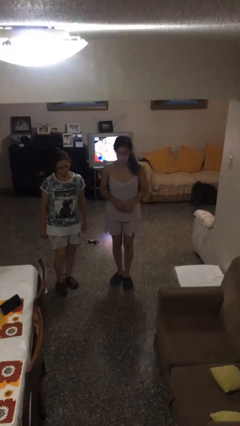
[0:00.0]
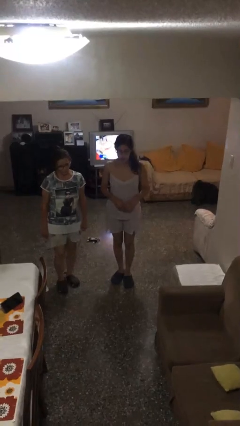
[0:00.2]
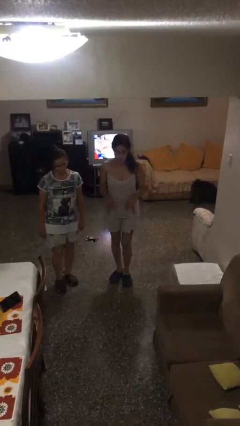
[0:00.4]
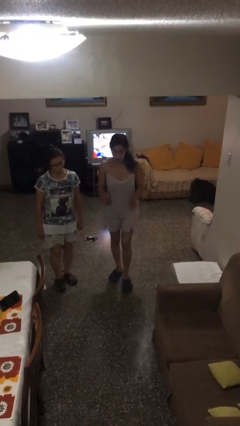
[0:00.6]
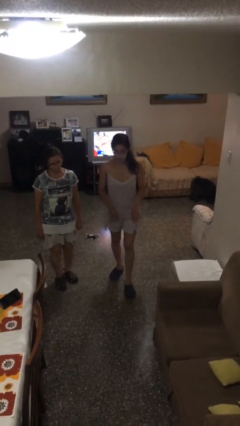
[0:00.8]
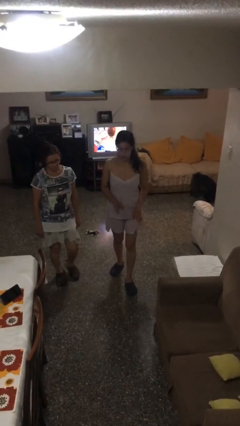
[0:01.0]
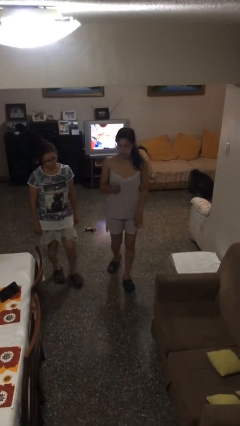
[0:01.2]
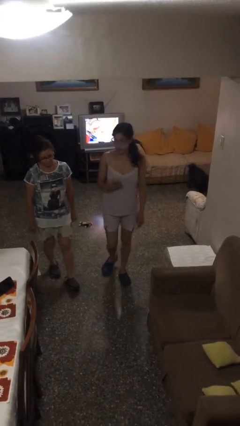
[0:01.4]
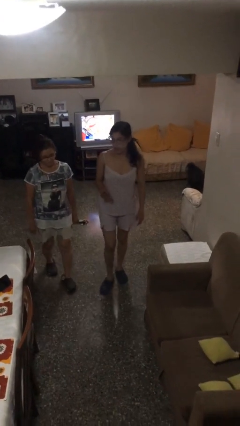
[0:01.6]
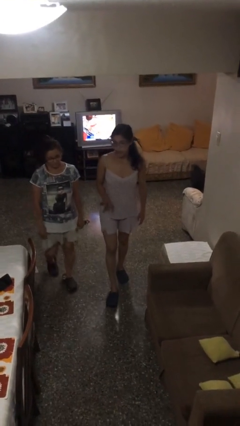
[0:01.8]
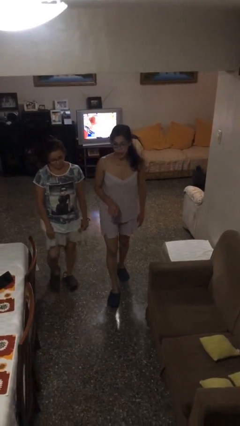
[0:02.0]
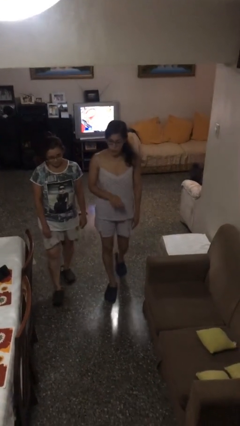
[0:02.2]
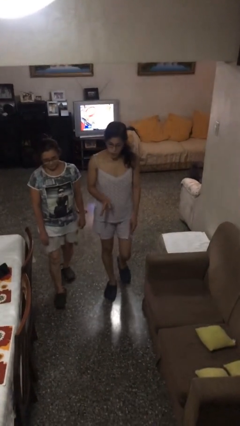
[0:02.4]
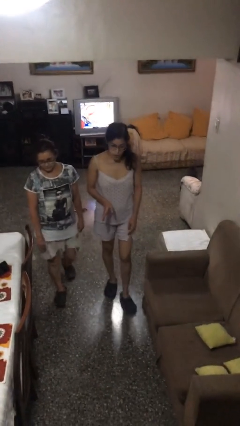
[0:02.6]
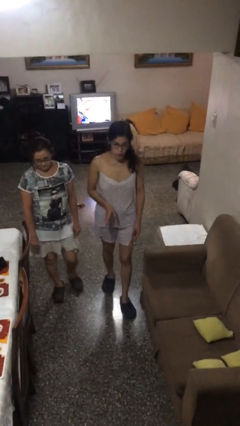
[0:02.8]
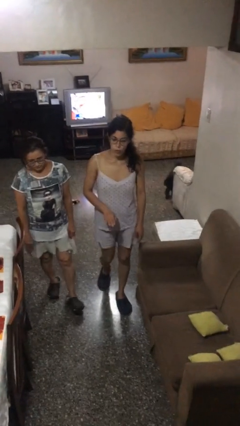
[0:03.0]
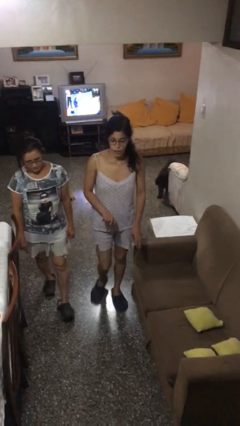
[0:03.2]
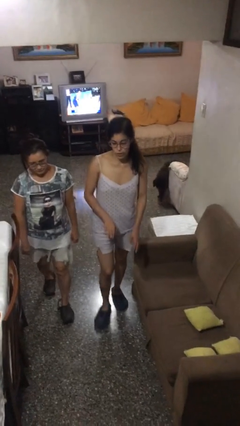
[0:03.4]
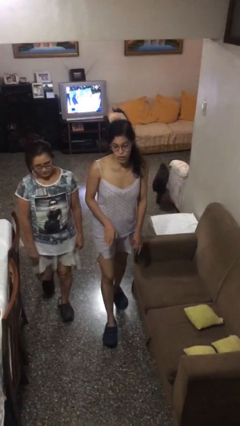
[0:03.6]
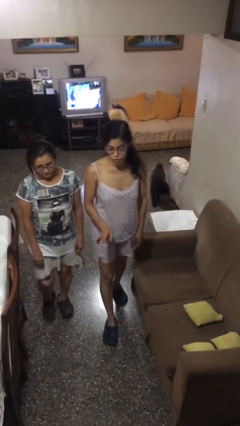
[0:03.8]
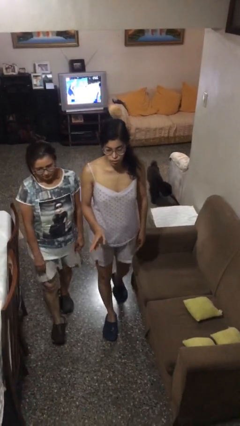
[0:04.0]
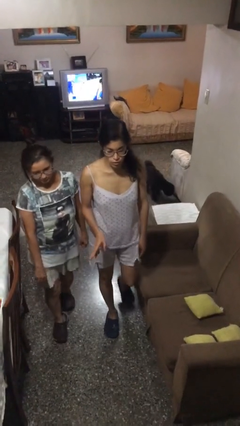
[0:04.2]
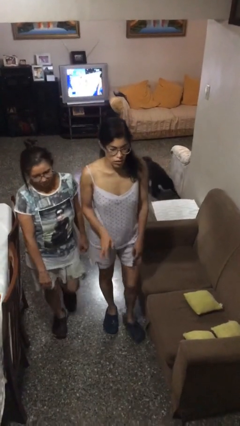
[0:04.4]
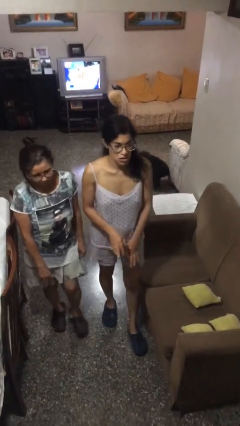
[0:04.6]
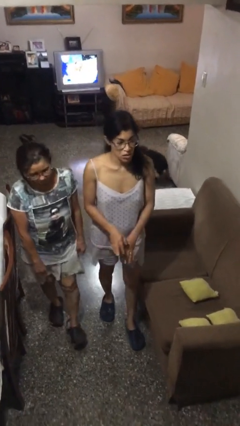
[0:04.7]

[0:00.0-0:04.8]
person talks to person

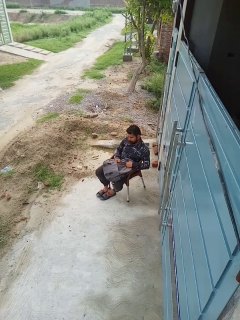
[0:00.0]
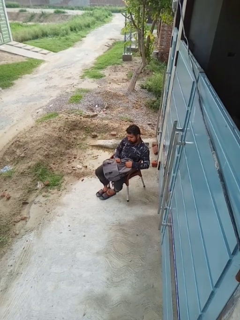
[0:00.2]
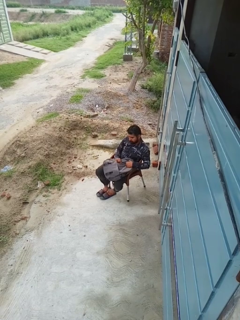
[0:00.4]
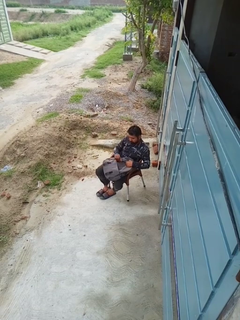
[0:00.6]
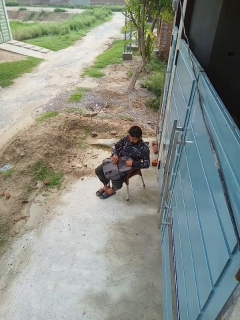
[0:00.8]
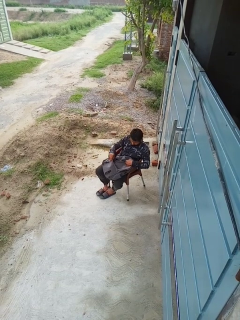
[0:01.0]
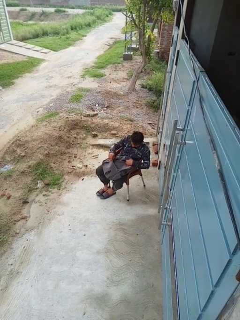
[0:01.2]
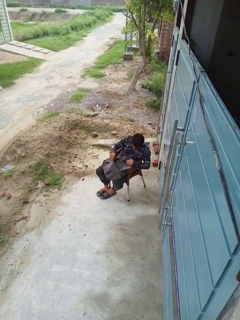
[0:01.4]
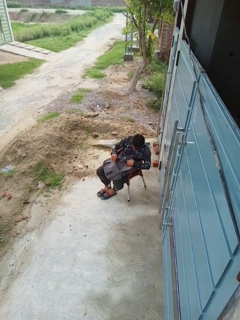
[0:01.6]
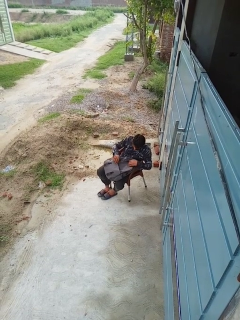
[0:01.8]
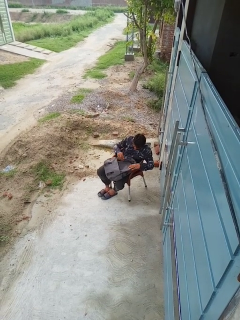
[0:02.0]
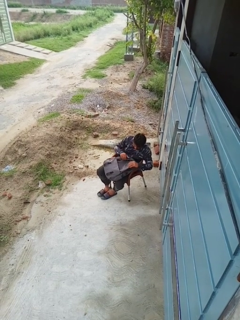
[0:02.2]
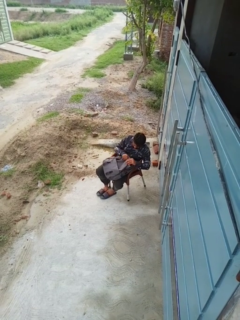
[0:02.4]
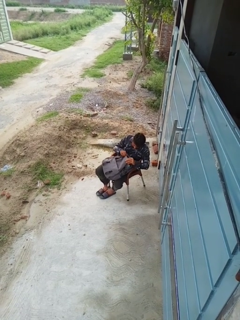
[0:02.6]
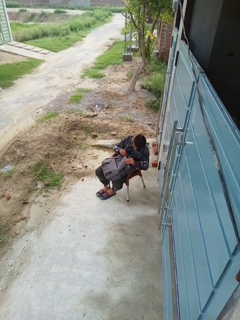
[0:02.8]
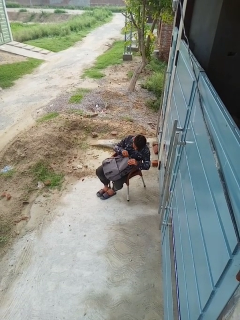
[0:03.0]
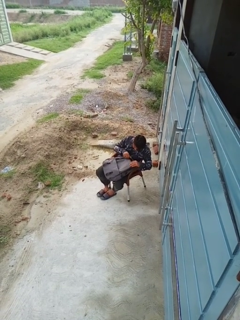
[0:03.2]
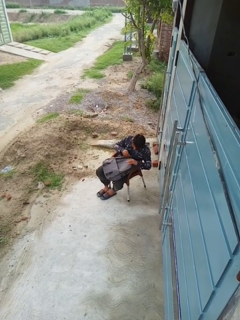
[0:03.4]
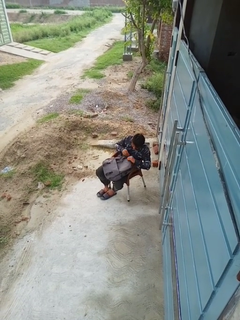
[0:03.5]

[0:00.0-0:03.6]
person searches in backpack

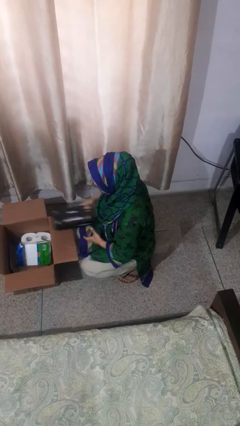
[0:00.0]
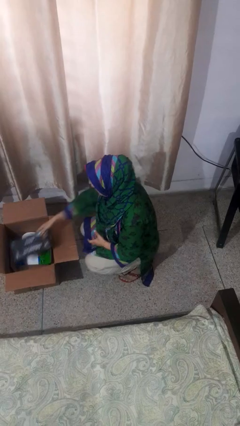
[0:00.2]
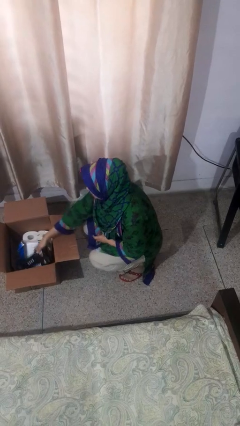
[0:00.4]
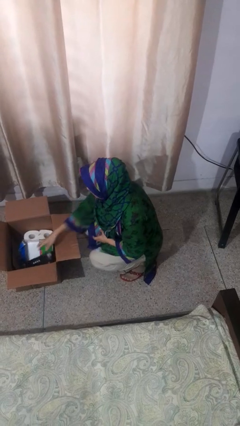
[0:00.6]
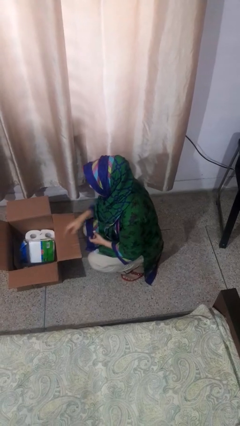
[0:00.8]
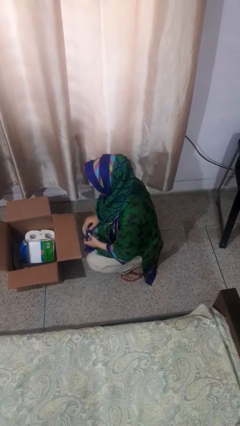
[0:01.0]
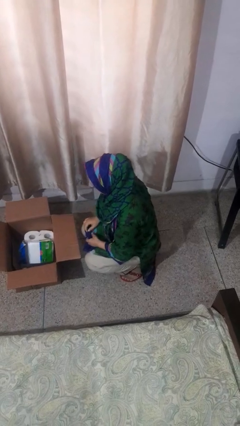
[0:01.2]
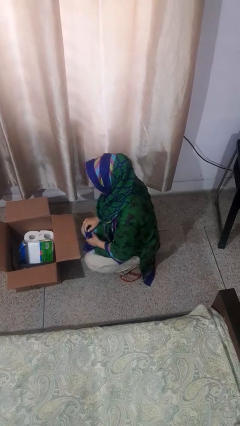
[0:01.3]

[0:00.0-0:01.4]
person puts object into box

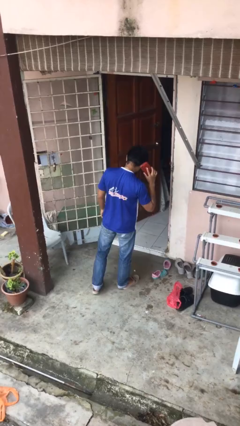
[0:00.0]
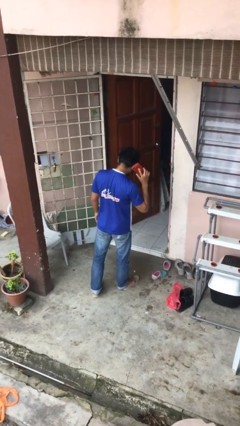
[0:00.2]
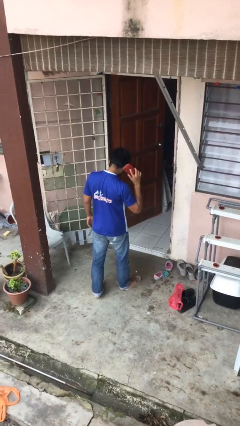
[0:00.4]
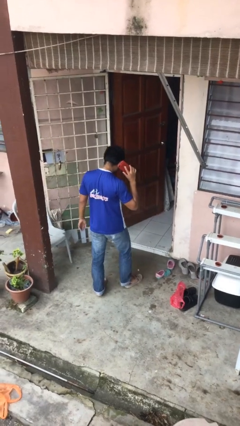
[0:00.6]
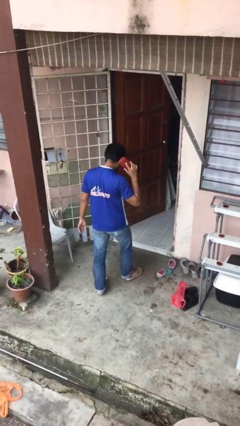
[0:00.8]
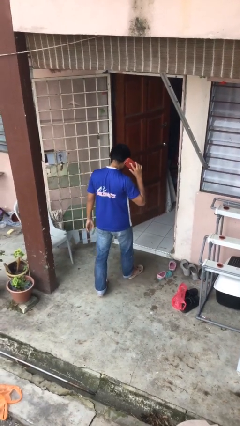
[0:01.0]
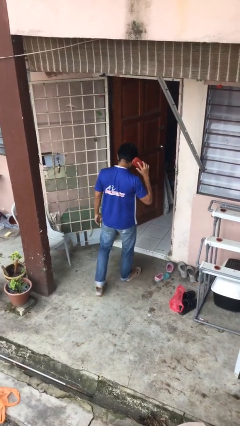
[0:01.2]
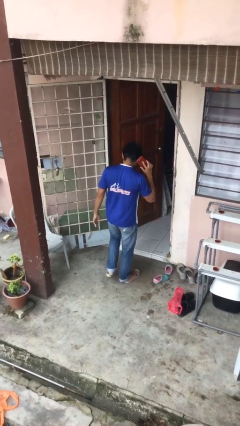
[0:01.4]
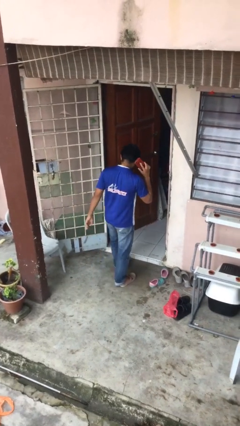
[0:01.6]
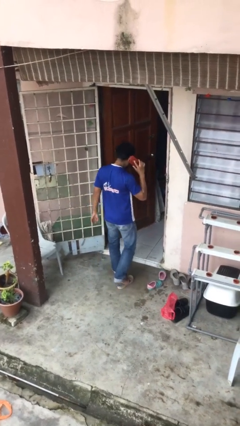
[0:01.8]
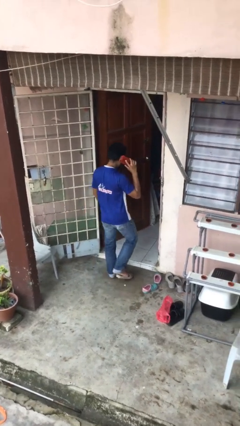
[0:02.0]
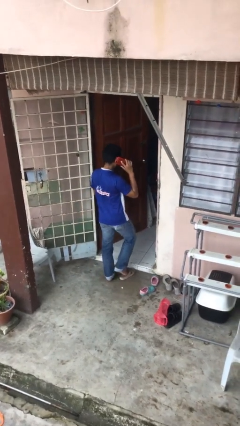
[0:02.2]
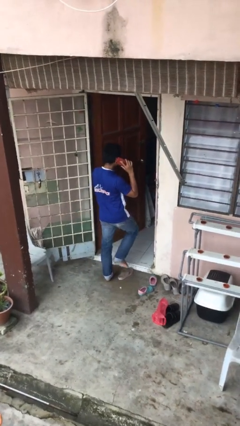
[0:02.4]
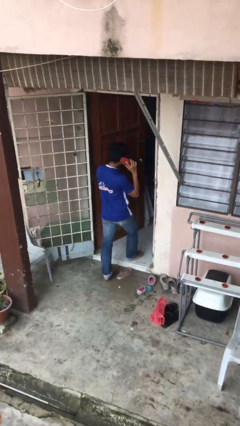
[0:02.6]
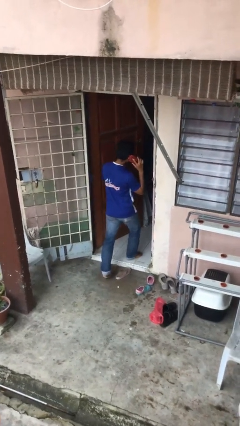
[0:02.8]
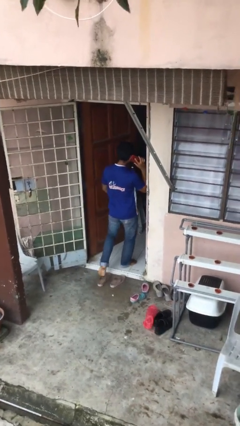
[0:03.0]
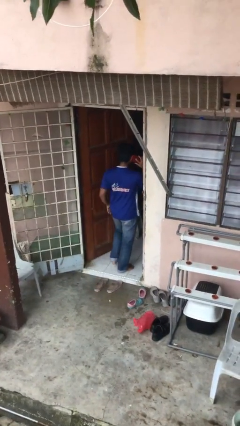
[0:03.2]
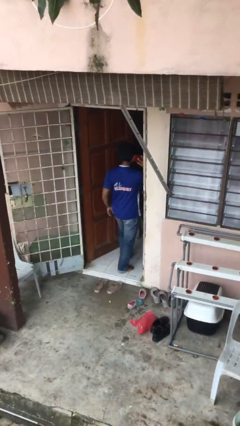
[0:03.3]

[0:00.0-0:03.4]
person exits scene through structure

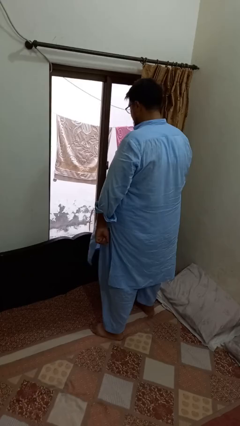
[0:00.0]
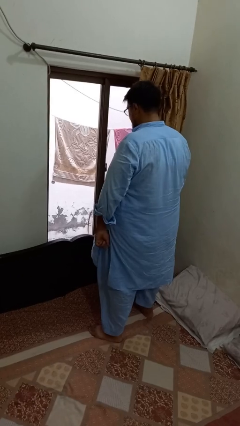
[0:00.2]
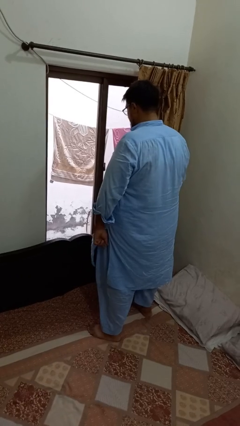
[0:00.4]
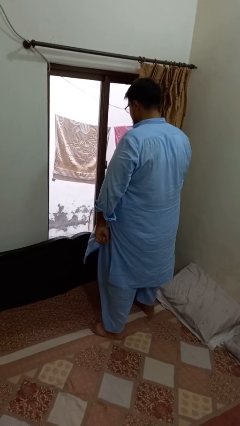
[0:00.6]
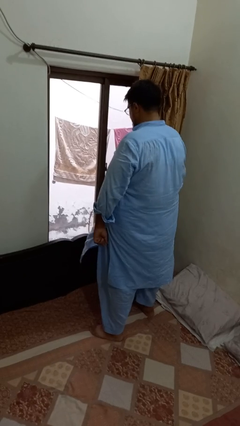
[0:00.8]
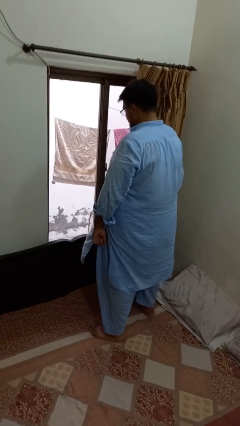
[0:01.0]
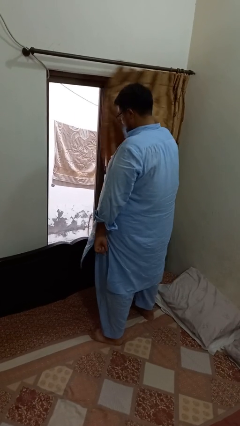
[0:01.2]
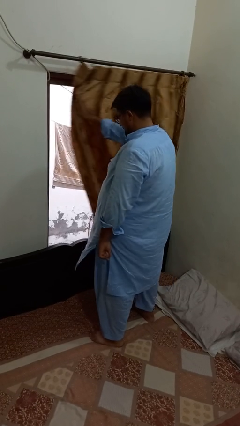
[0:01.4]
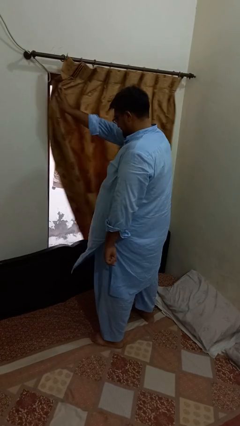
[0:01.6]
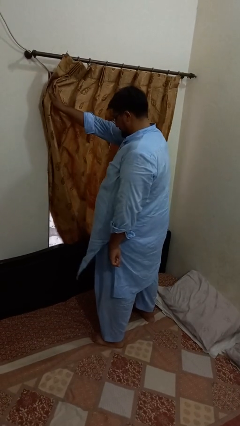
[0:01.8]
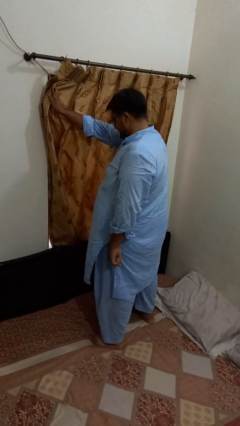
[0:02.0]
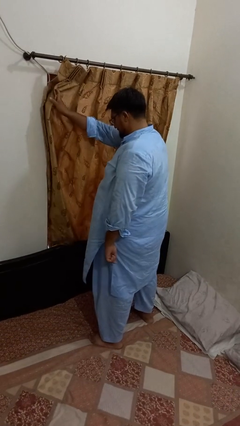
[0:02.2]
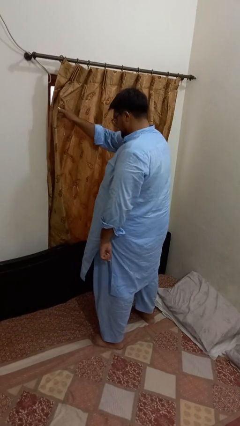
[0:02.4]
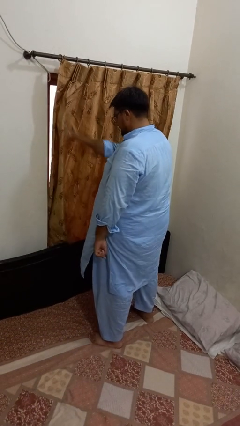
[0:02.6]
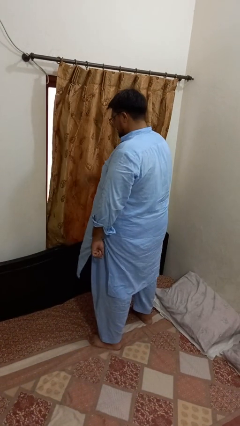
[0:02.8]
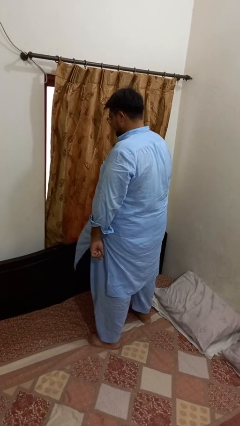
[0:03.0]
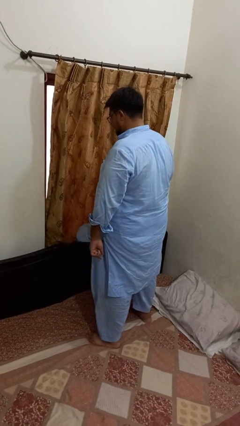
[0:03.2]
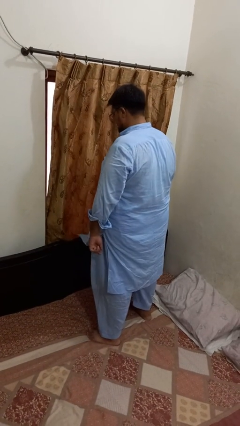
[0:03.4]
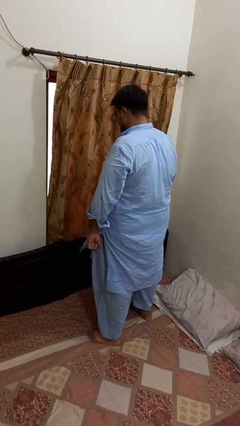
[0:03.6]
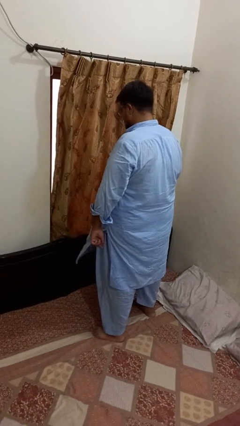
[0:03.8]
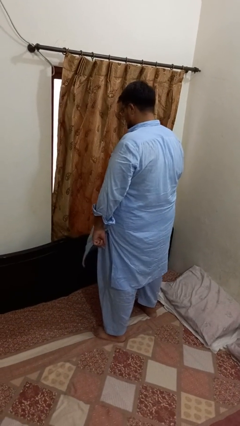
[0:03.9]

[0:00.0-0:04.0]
person closes curtains

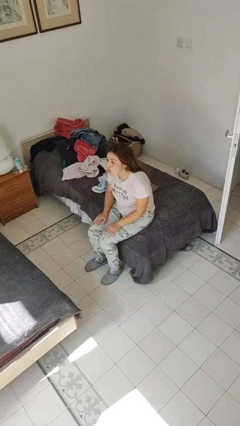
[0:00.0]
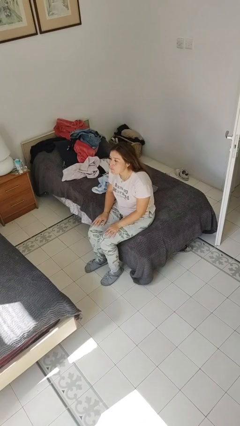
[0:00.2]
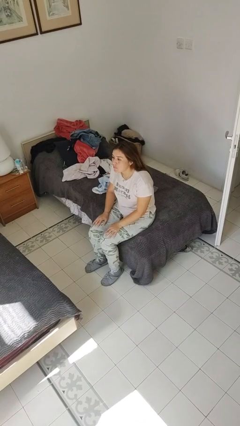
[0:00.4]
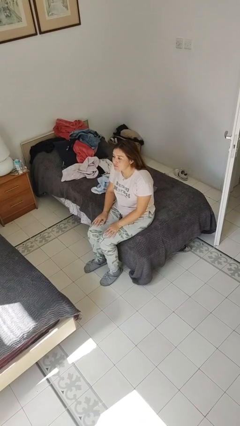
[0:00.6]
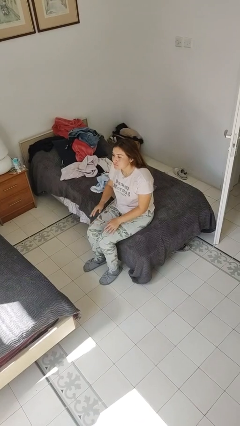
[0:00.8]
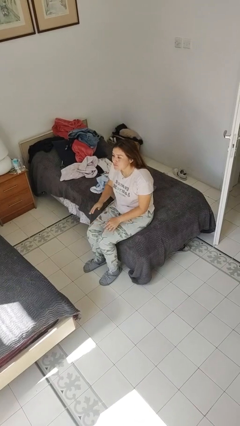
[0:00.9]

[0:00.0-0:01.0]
person sticks out tongue
